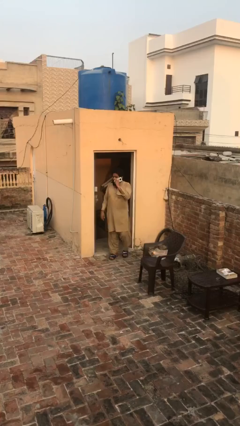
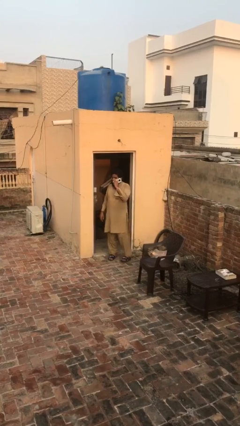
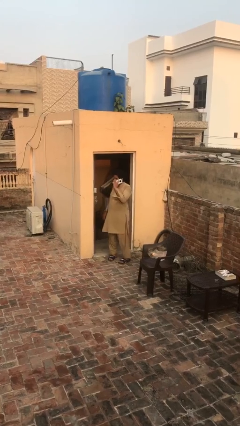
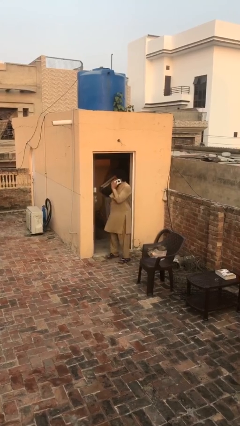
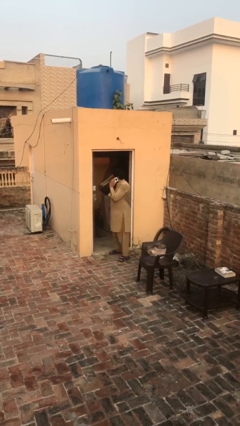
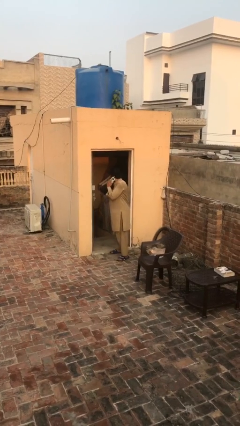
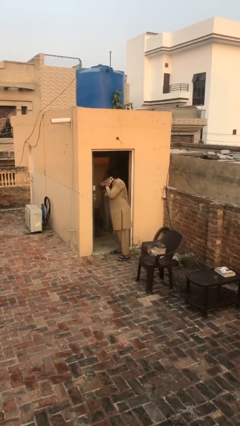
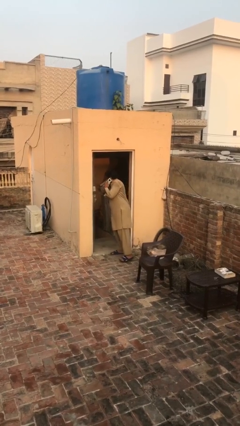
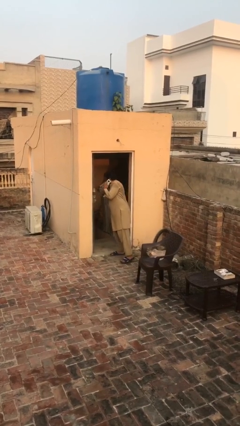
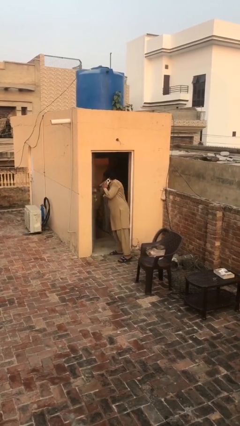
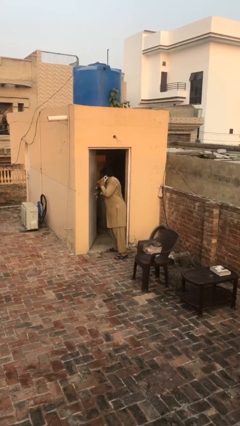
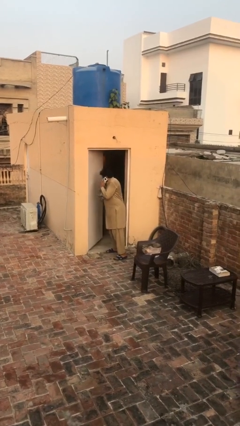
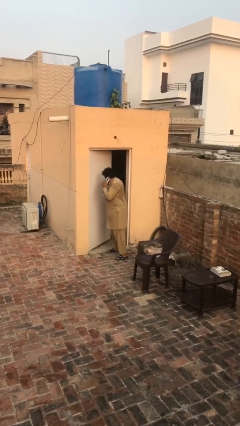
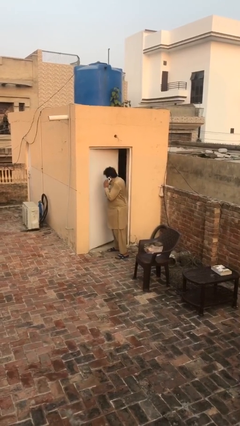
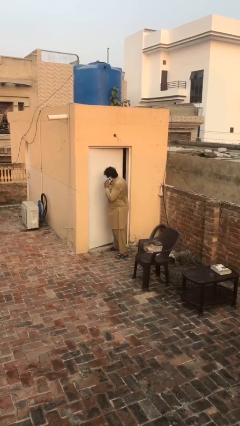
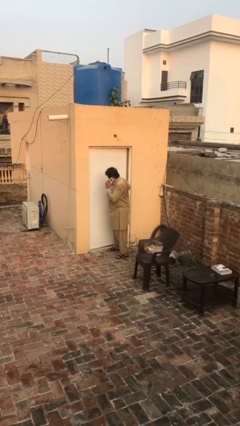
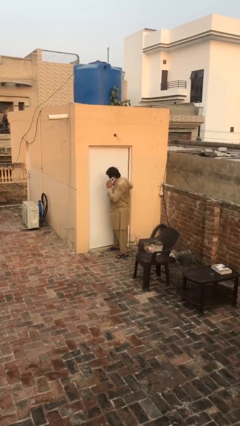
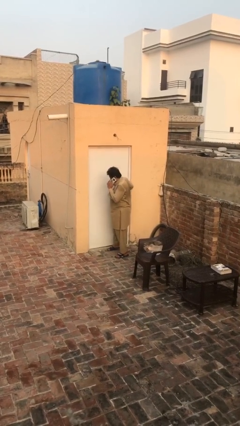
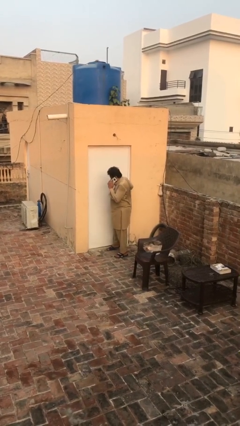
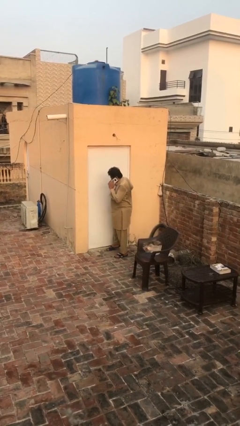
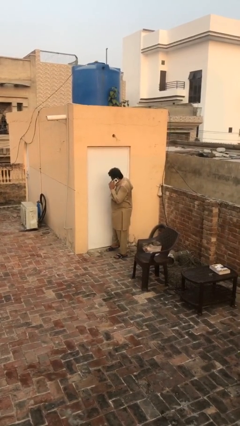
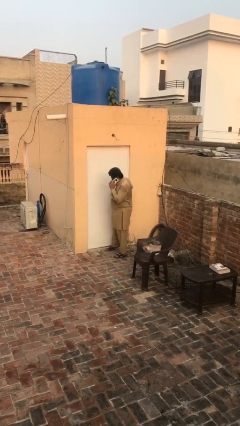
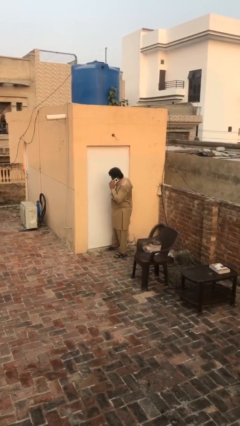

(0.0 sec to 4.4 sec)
person closes facility door

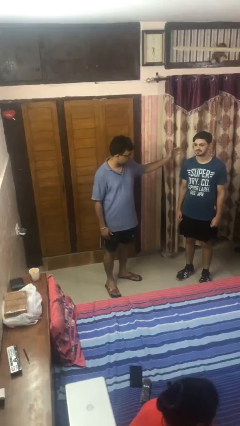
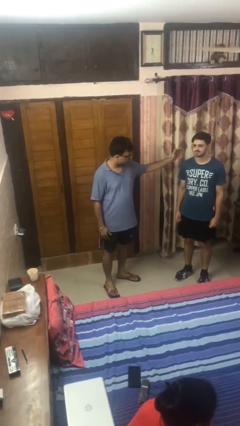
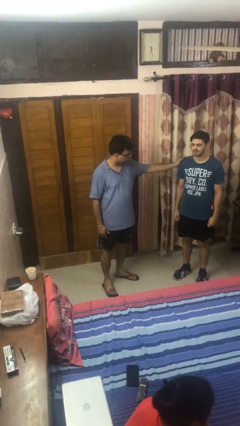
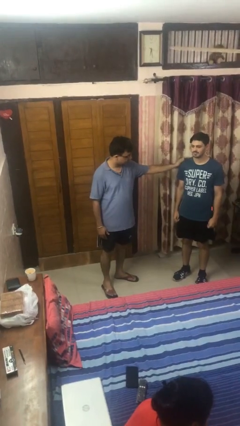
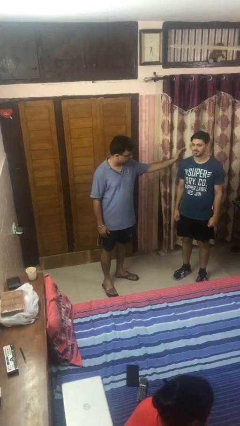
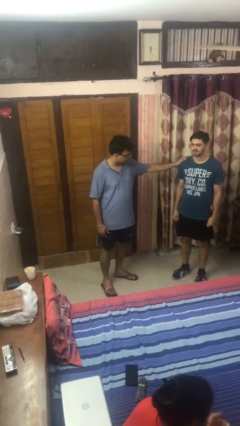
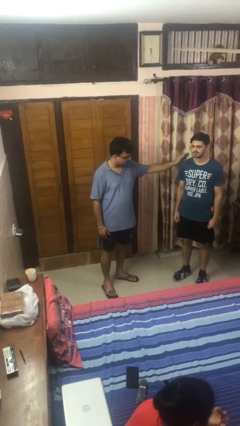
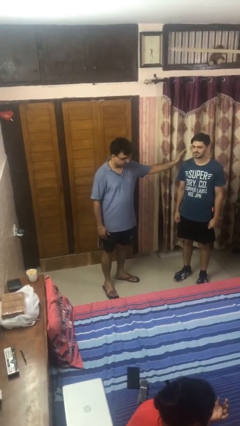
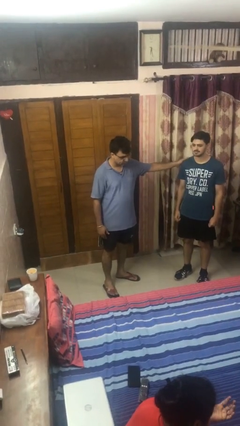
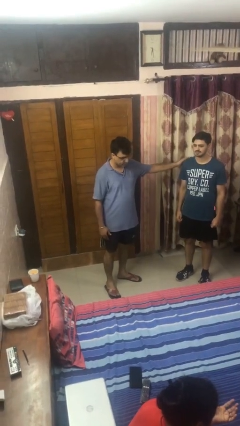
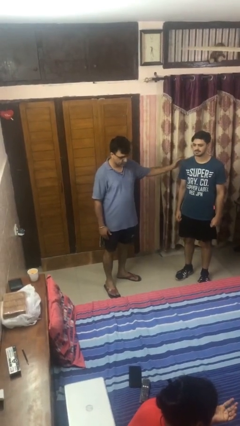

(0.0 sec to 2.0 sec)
person pounds shoulders of person

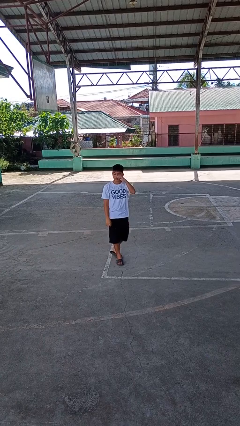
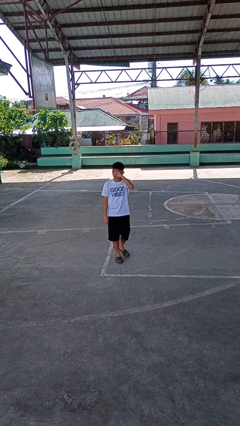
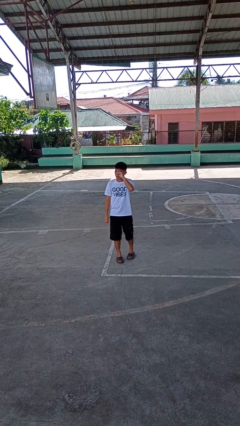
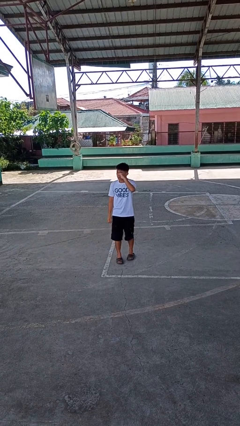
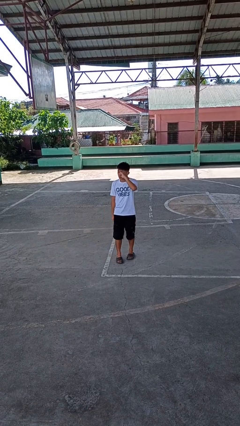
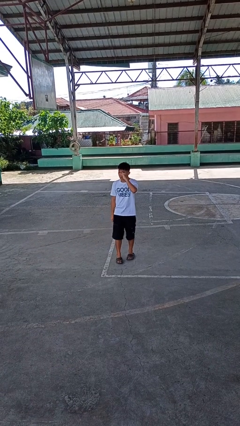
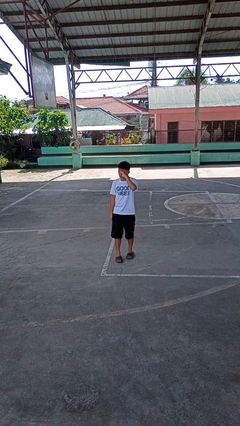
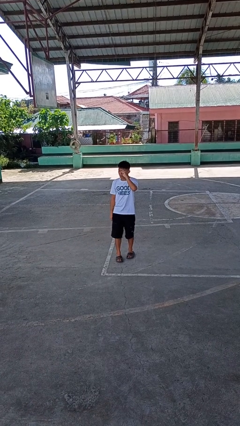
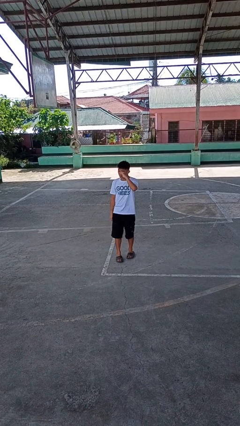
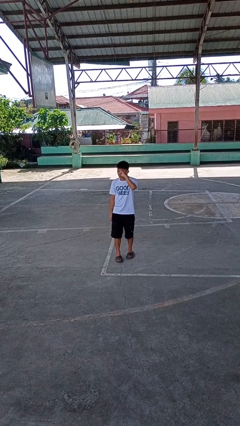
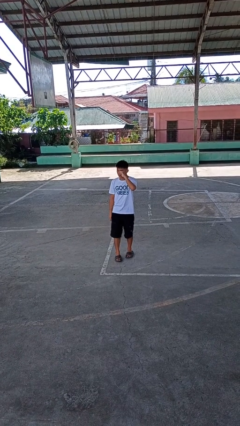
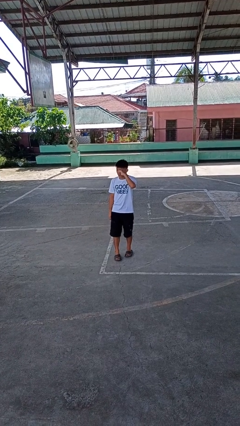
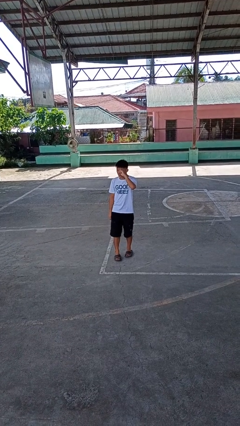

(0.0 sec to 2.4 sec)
person rubs eyes

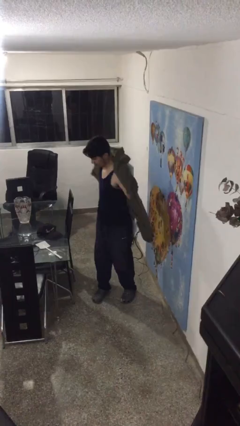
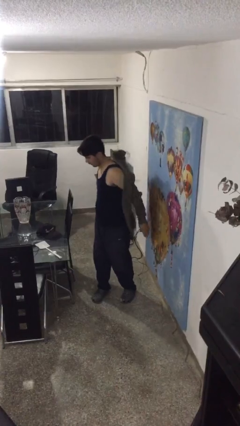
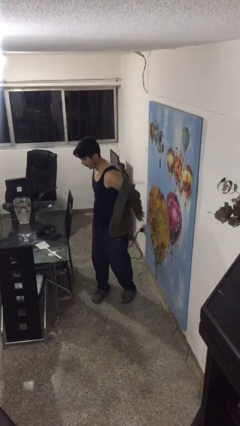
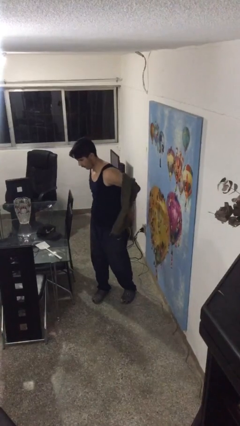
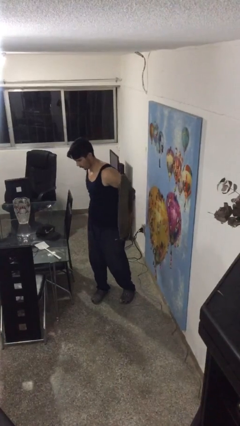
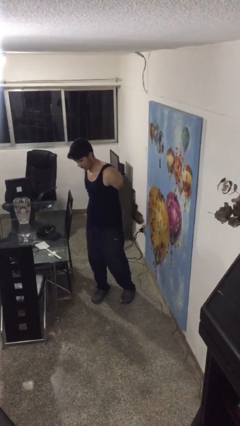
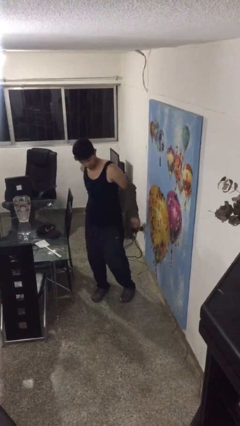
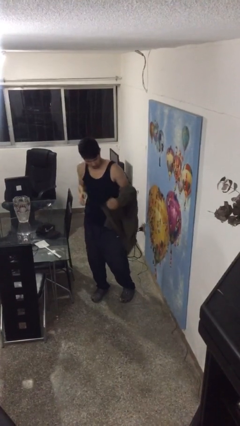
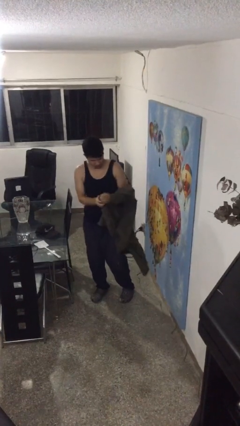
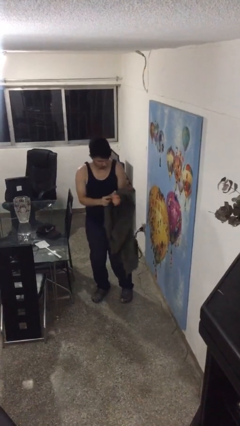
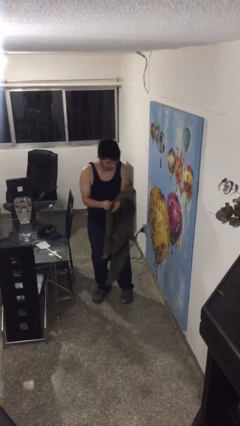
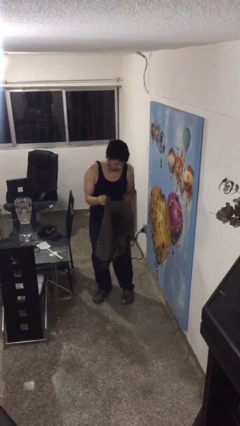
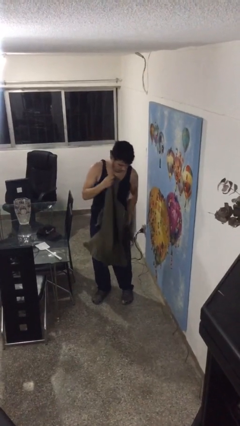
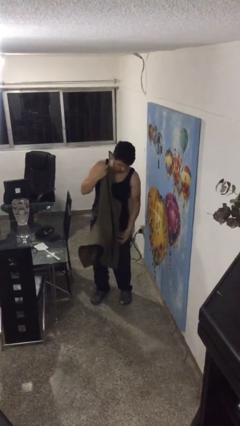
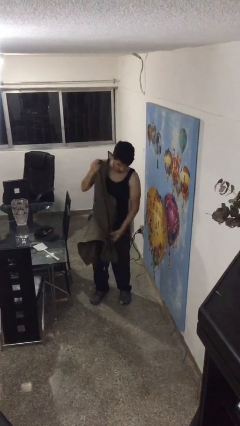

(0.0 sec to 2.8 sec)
person takes off jacket

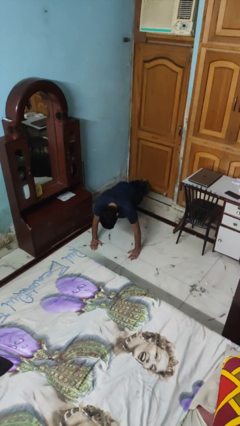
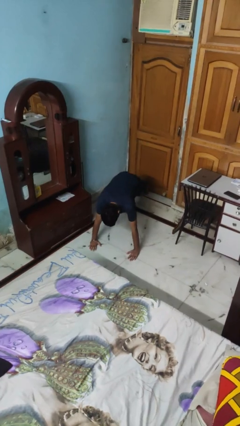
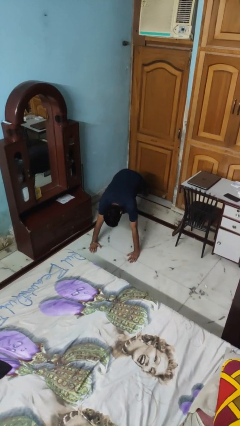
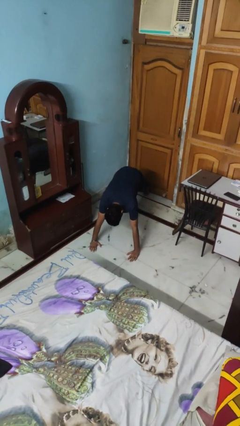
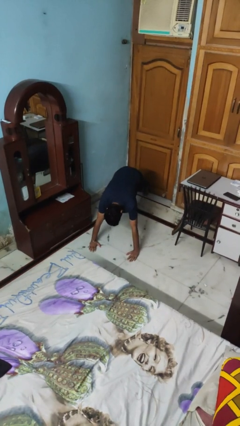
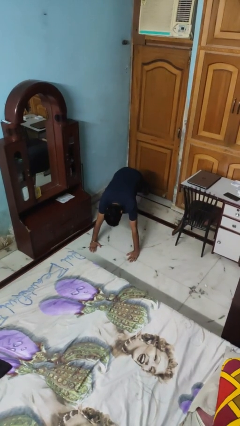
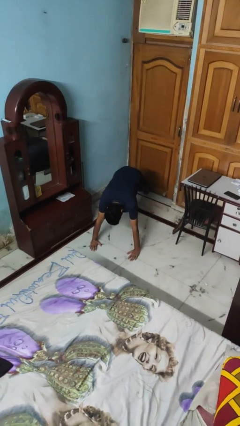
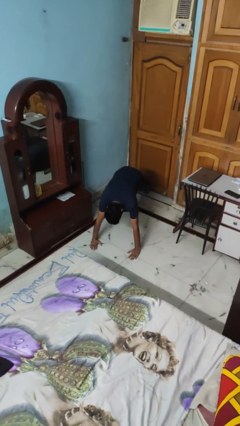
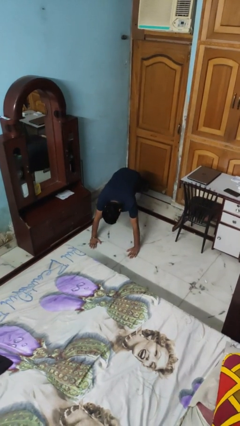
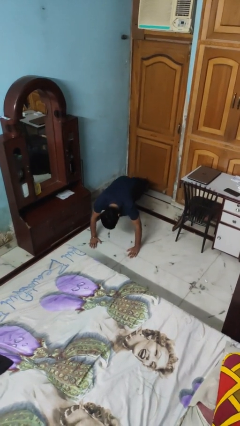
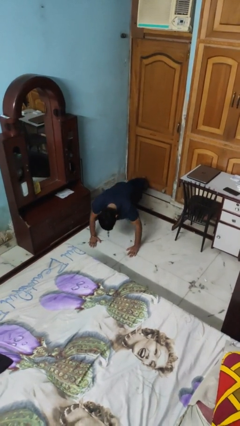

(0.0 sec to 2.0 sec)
person exercises with pushup

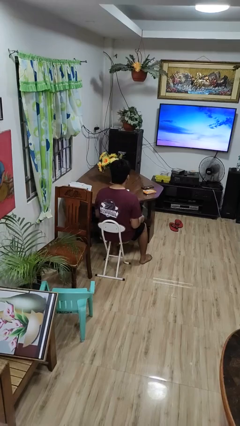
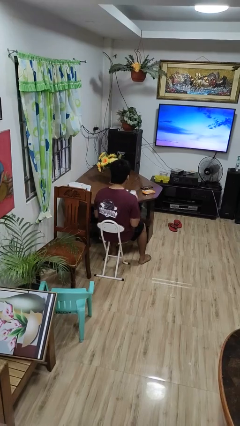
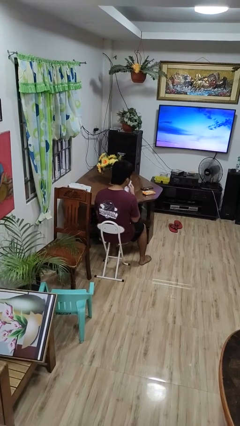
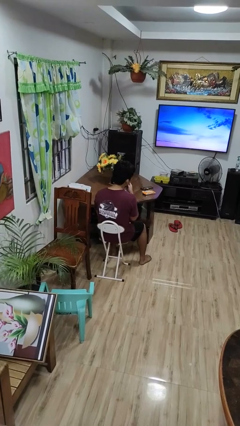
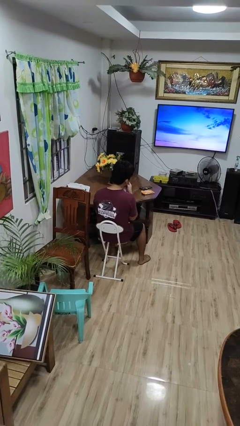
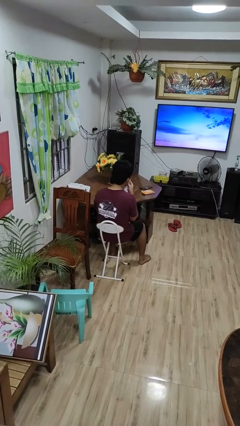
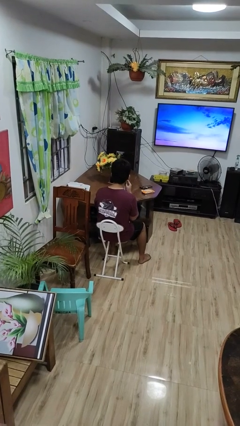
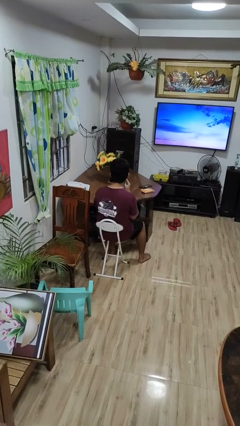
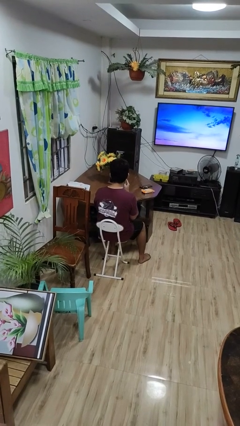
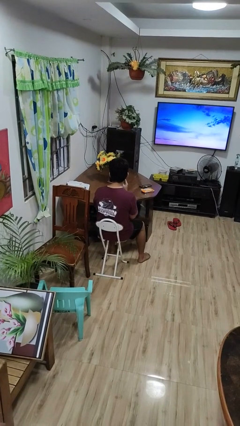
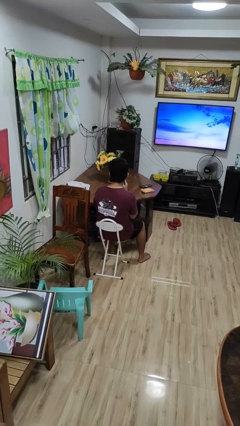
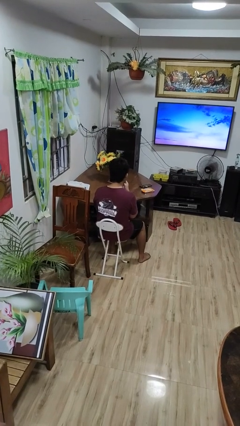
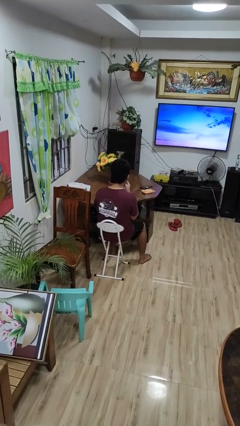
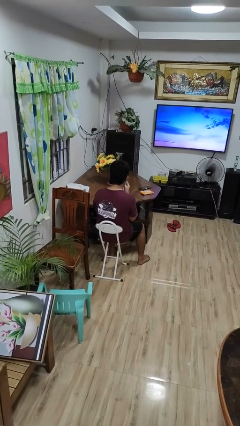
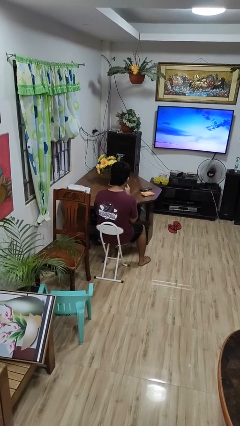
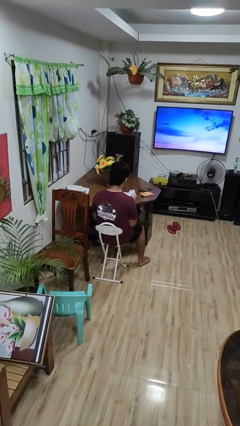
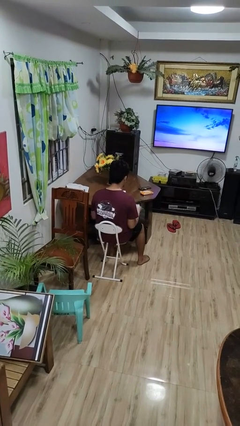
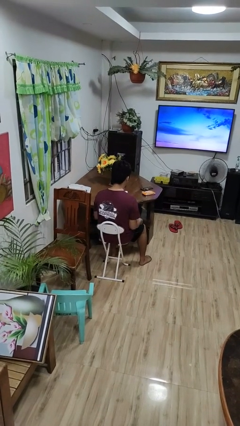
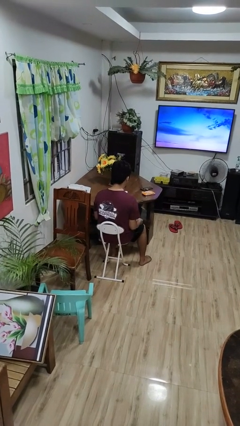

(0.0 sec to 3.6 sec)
person wipes mouth with napkin

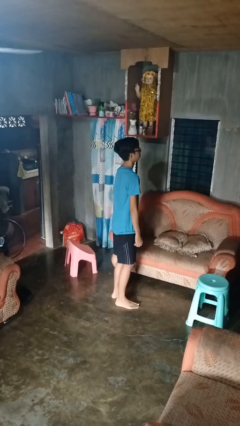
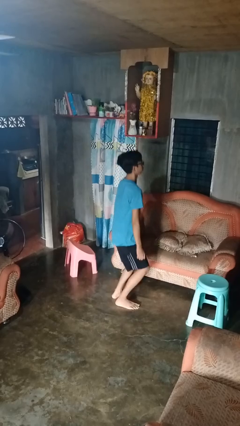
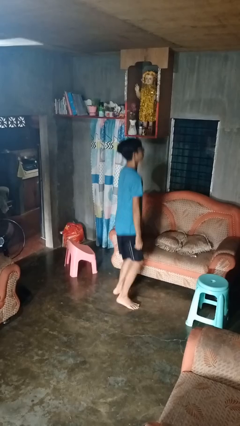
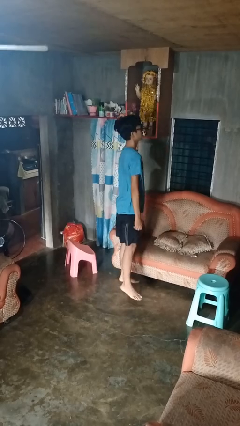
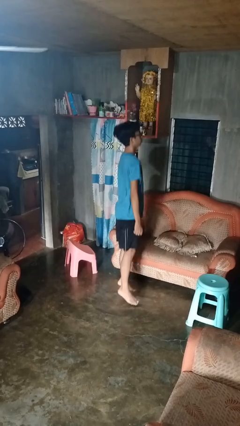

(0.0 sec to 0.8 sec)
person jumps
